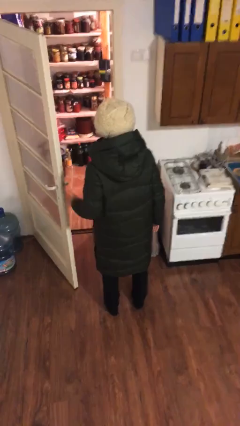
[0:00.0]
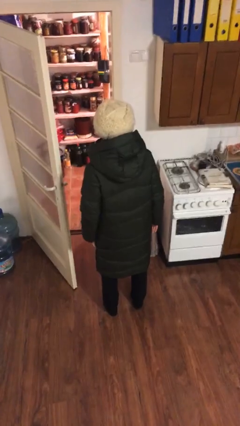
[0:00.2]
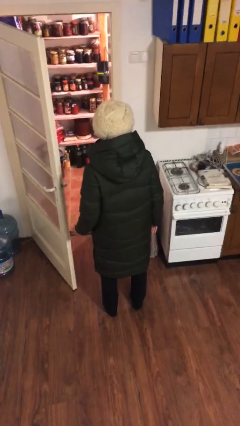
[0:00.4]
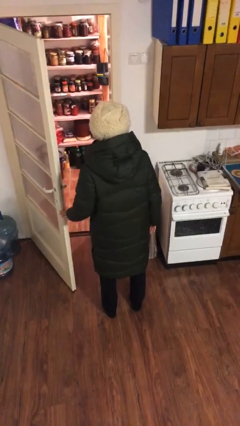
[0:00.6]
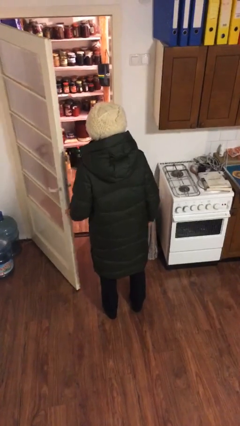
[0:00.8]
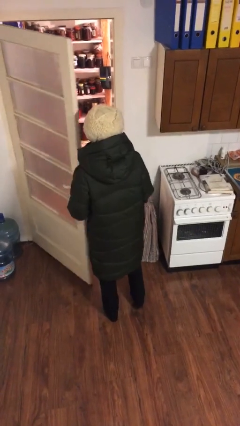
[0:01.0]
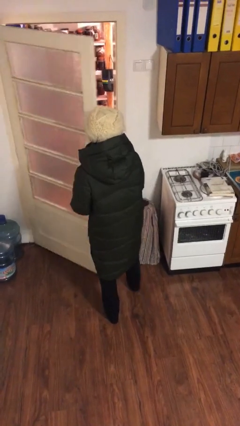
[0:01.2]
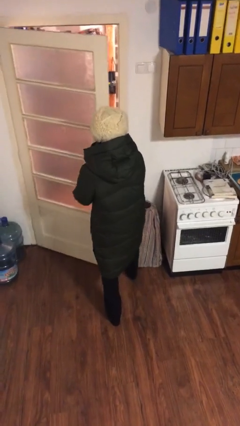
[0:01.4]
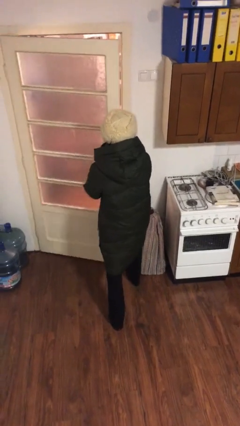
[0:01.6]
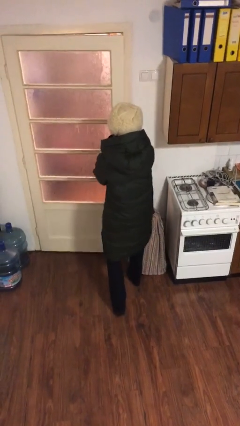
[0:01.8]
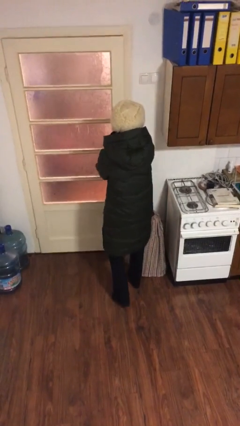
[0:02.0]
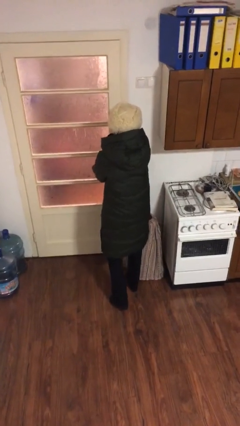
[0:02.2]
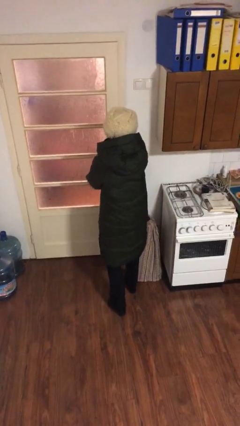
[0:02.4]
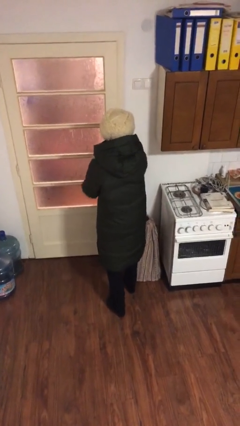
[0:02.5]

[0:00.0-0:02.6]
person closes facility door

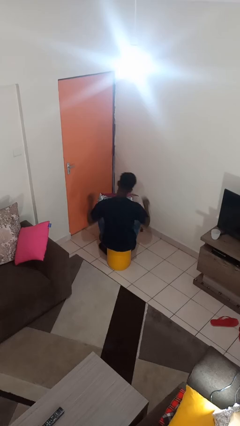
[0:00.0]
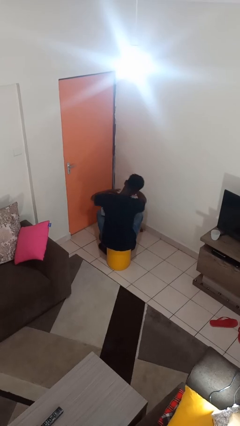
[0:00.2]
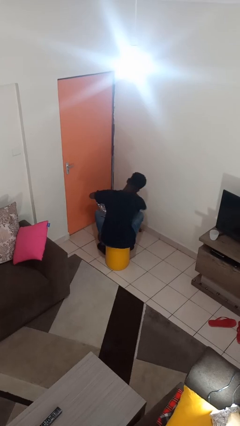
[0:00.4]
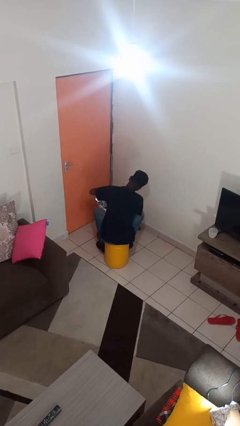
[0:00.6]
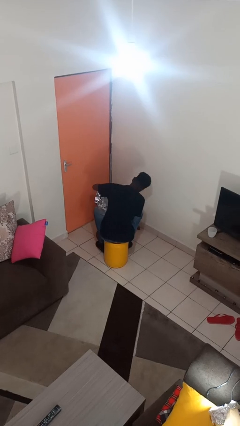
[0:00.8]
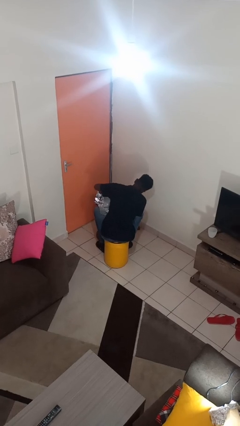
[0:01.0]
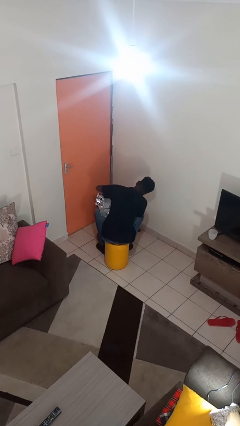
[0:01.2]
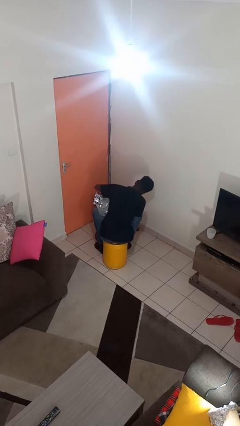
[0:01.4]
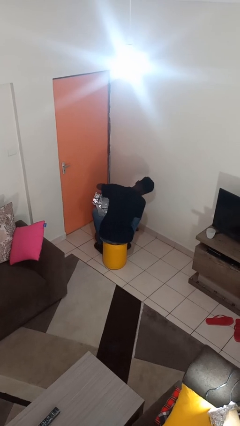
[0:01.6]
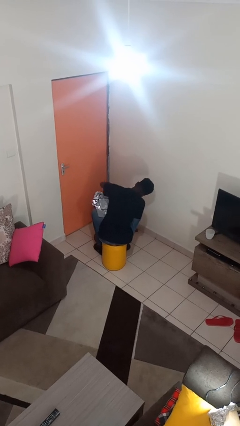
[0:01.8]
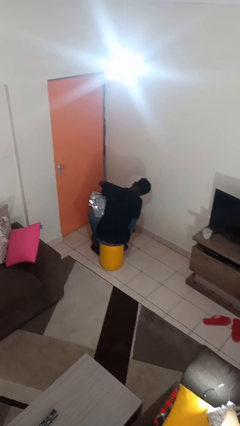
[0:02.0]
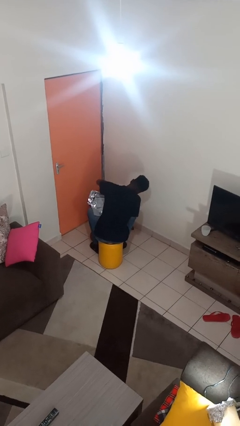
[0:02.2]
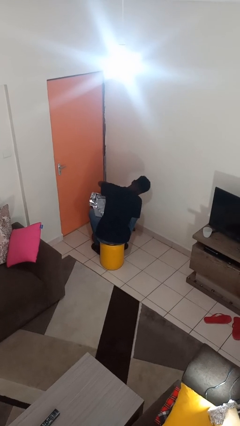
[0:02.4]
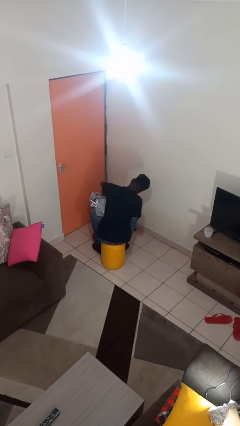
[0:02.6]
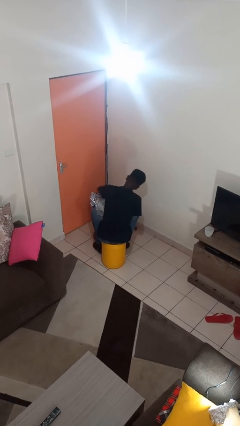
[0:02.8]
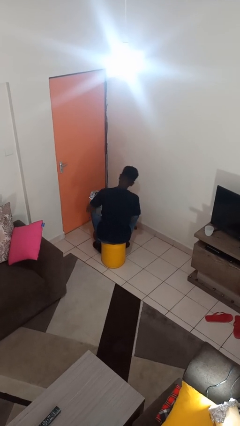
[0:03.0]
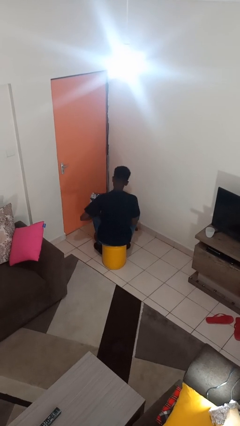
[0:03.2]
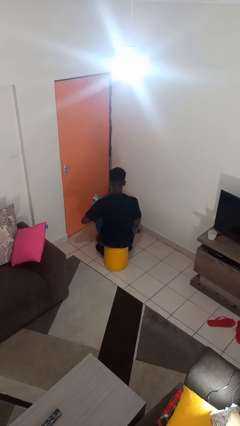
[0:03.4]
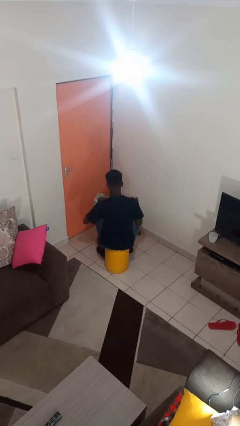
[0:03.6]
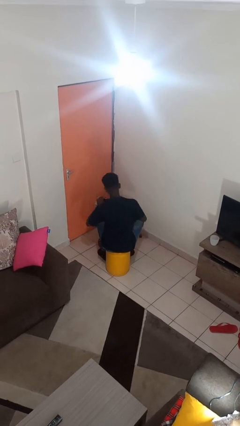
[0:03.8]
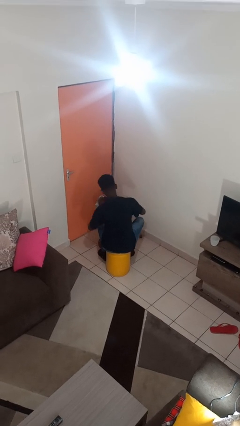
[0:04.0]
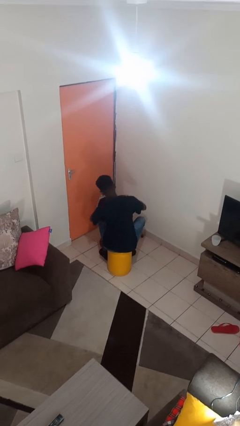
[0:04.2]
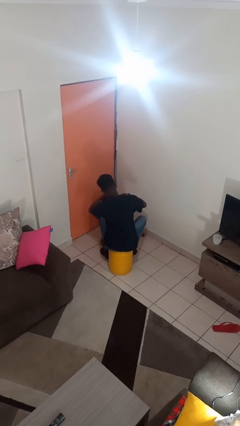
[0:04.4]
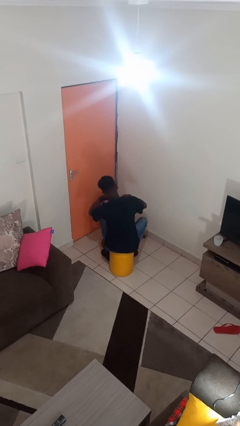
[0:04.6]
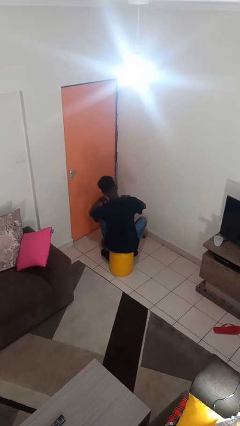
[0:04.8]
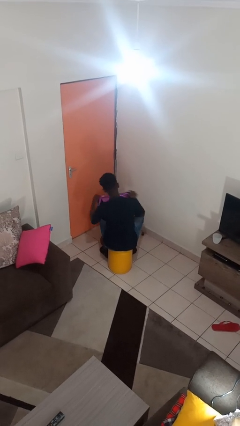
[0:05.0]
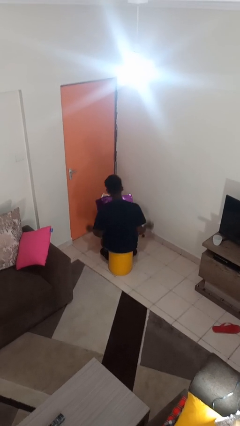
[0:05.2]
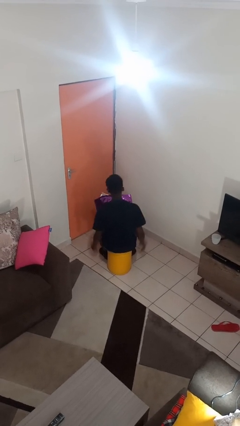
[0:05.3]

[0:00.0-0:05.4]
person wraps box

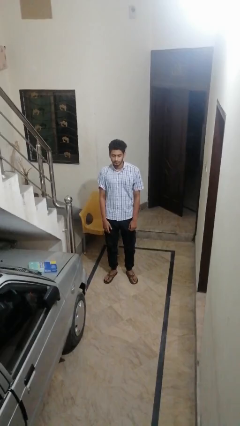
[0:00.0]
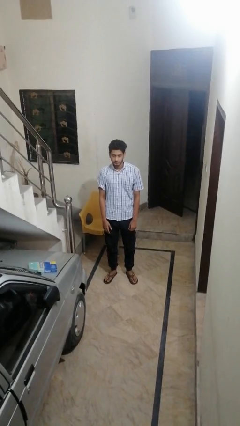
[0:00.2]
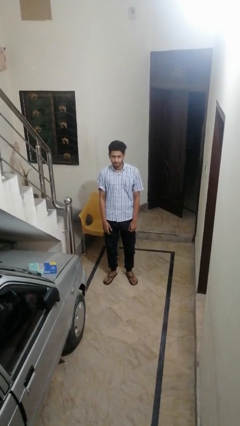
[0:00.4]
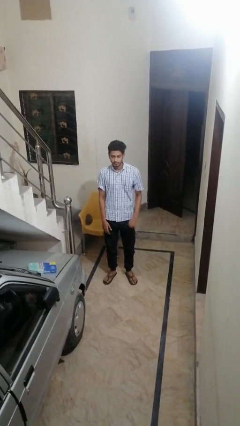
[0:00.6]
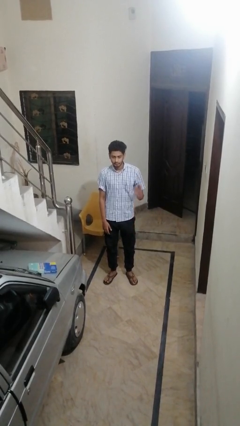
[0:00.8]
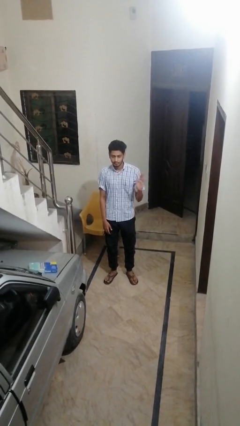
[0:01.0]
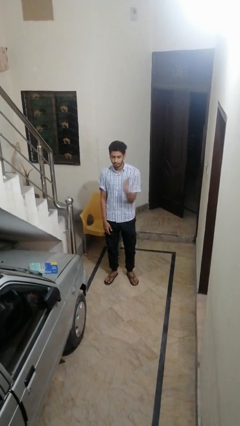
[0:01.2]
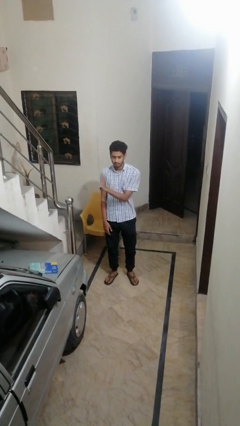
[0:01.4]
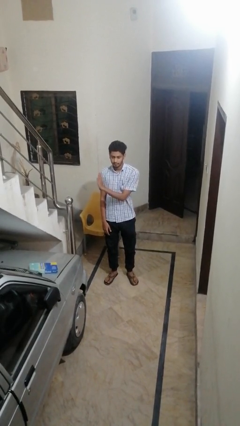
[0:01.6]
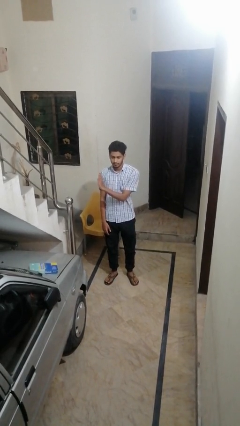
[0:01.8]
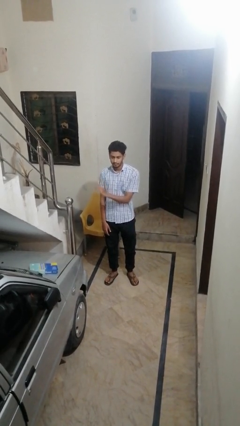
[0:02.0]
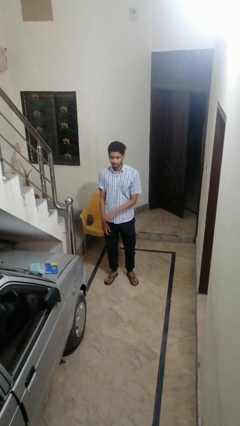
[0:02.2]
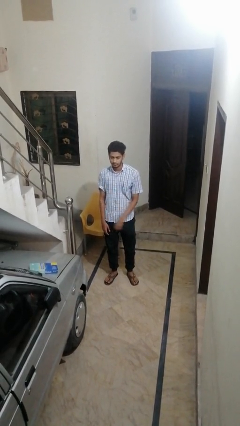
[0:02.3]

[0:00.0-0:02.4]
person gestures swipe right

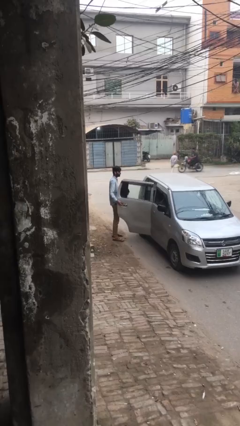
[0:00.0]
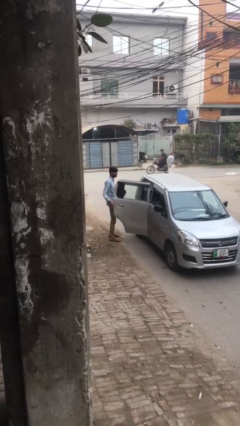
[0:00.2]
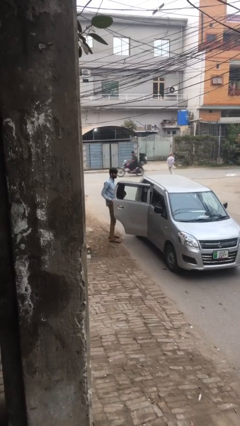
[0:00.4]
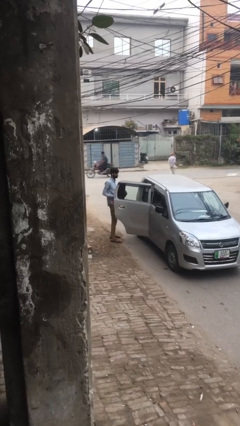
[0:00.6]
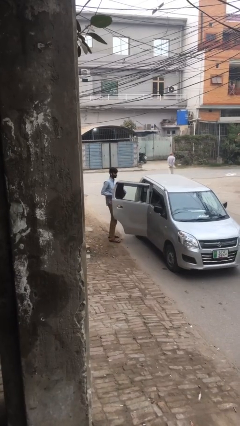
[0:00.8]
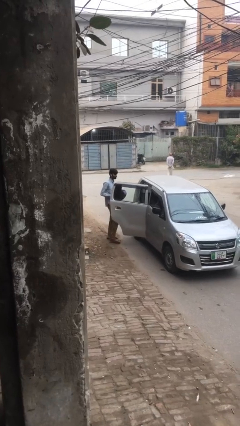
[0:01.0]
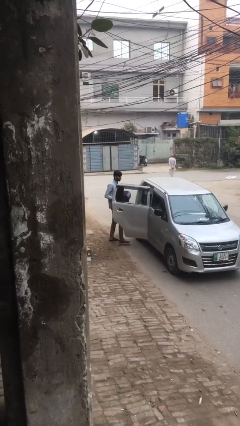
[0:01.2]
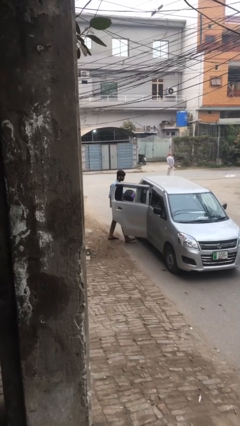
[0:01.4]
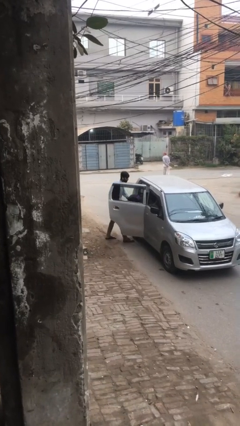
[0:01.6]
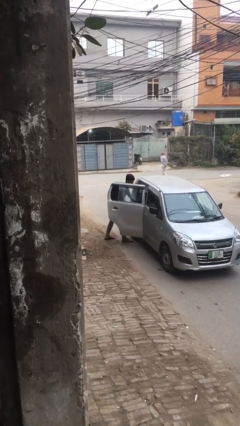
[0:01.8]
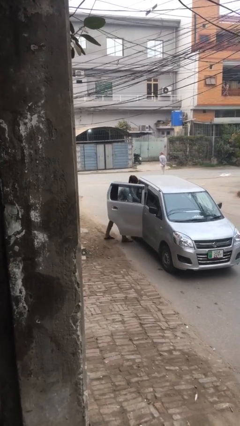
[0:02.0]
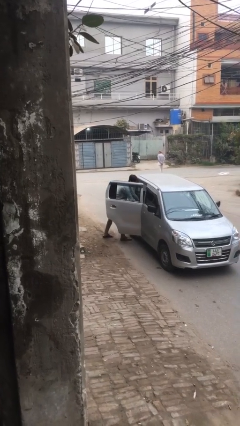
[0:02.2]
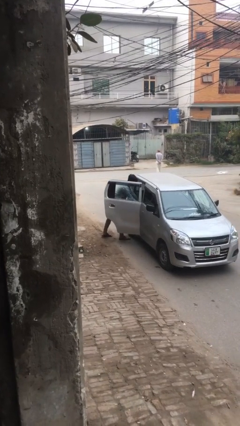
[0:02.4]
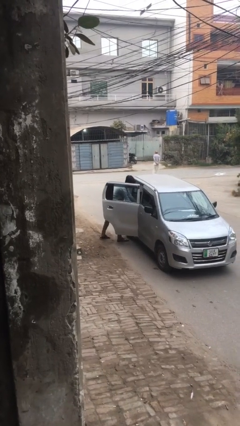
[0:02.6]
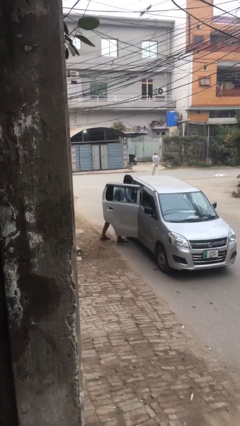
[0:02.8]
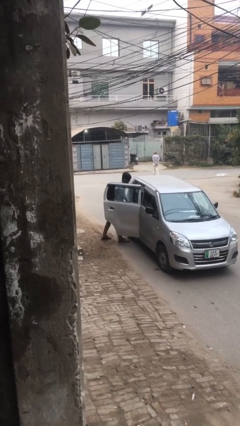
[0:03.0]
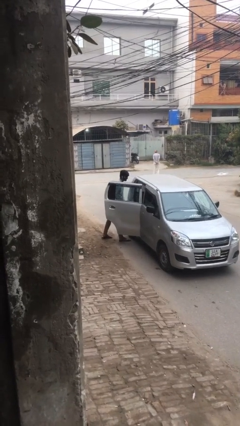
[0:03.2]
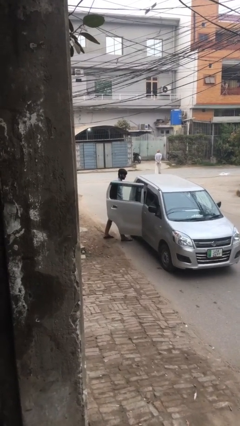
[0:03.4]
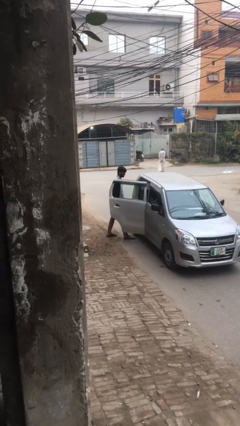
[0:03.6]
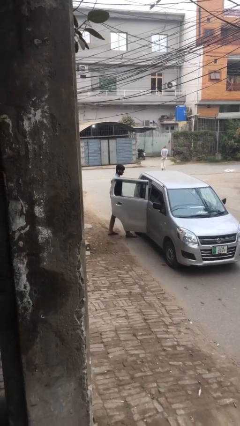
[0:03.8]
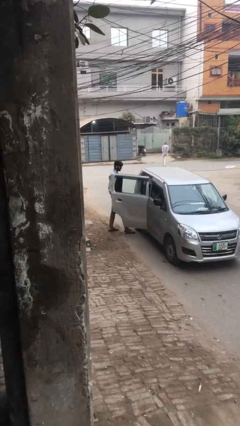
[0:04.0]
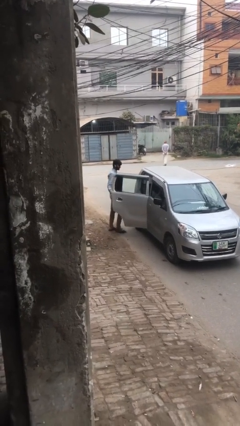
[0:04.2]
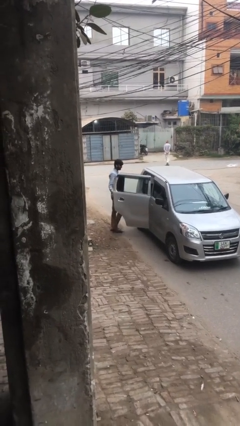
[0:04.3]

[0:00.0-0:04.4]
person loads car

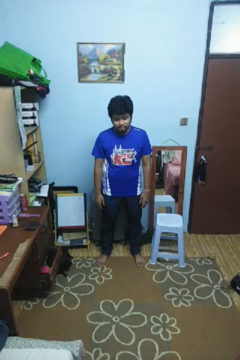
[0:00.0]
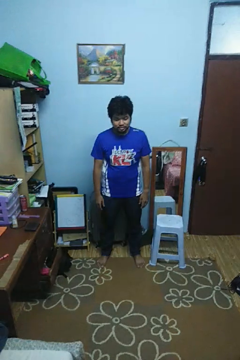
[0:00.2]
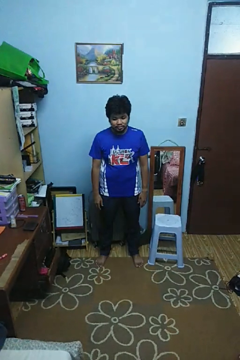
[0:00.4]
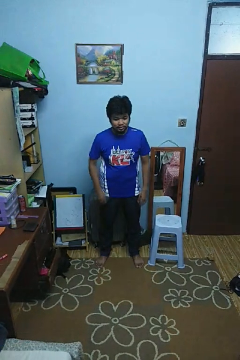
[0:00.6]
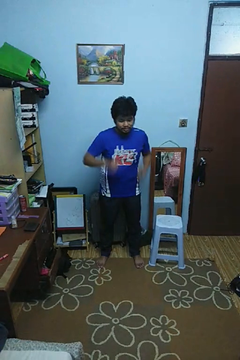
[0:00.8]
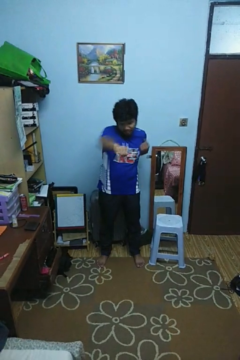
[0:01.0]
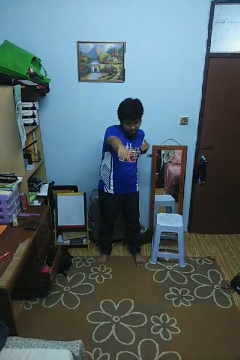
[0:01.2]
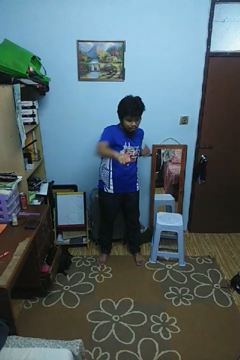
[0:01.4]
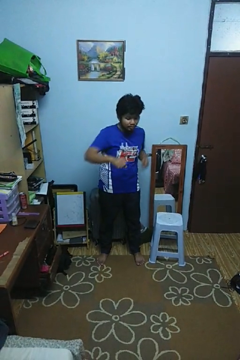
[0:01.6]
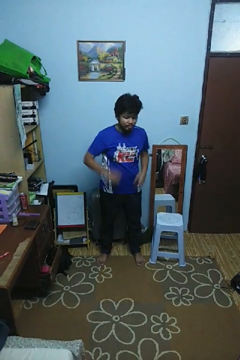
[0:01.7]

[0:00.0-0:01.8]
person punches

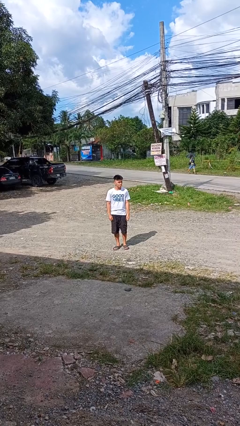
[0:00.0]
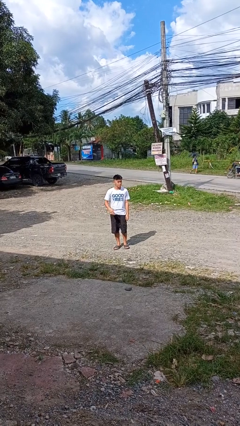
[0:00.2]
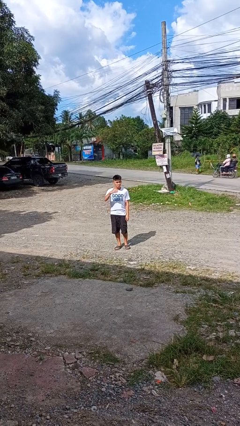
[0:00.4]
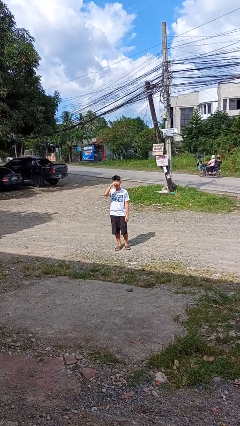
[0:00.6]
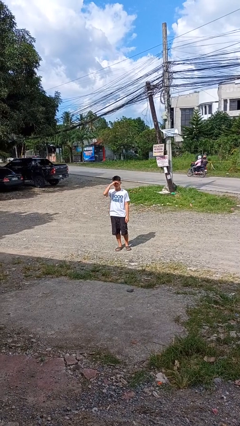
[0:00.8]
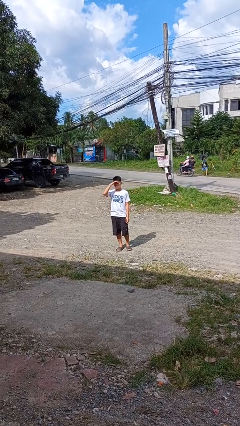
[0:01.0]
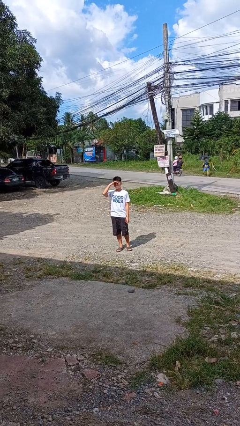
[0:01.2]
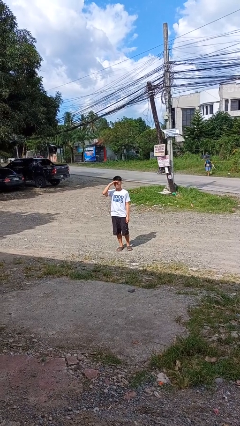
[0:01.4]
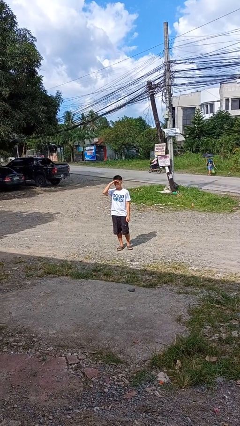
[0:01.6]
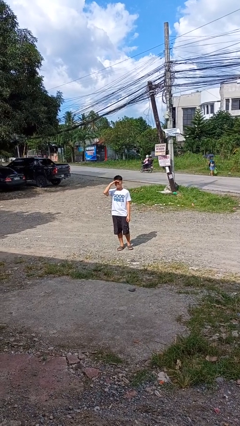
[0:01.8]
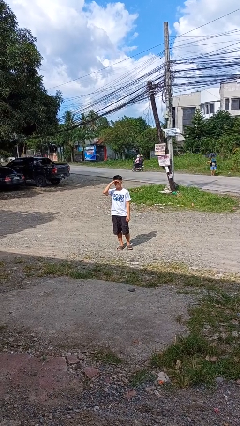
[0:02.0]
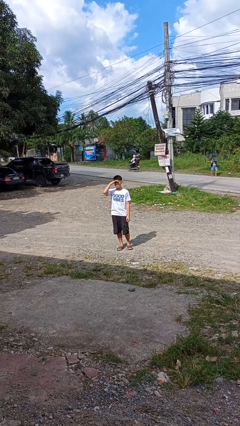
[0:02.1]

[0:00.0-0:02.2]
person shades eyes
